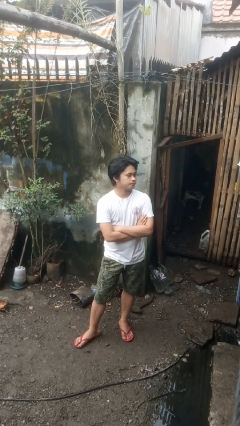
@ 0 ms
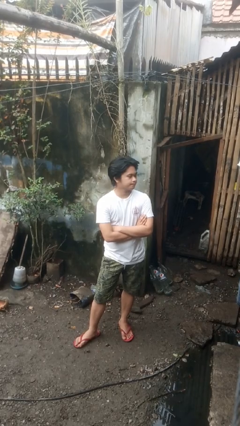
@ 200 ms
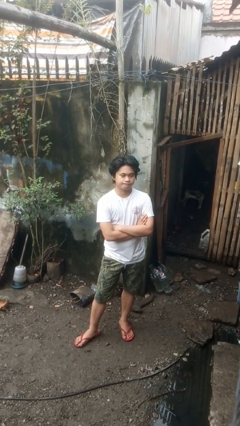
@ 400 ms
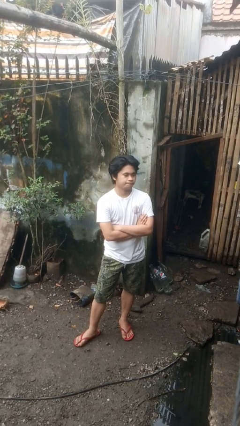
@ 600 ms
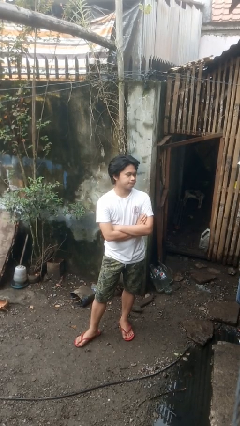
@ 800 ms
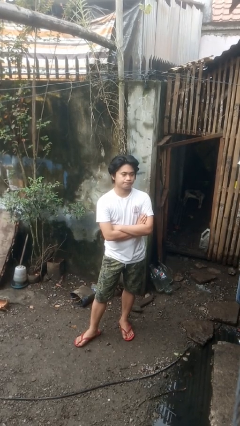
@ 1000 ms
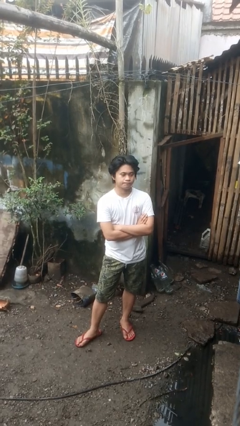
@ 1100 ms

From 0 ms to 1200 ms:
person shakes head

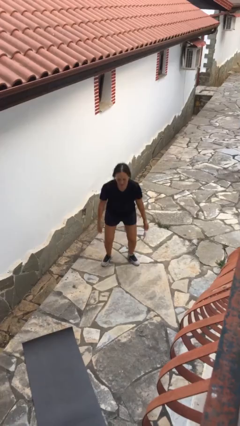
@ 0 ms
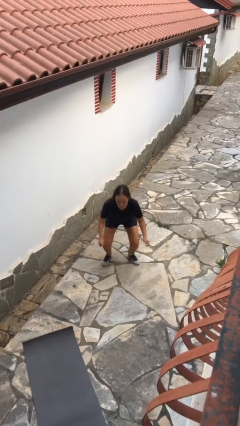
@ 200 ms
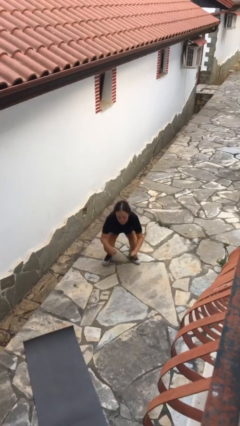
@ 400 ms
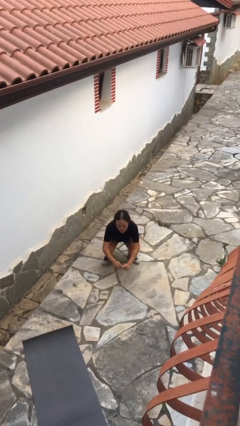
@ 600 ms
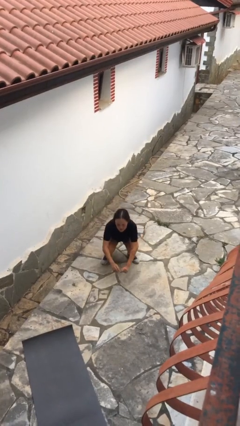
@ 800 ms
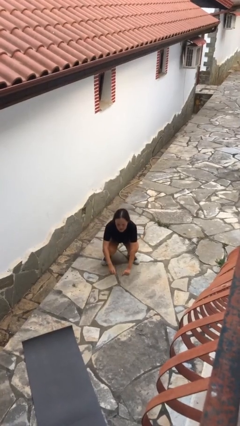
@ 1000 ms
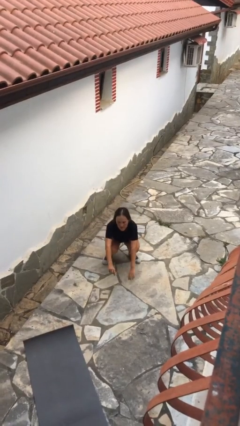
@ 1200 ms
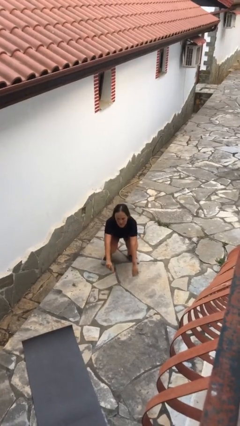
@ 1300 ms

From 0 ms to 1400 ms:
person squats

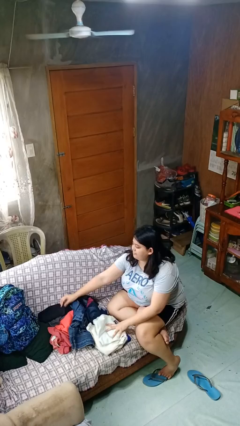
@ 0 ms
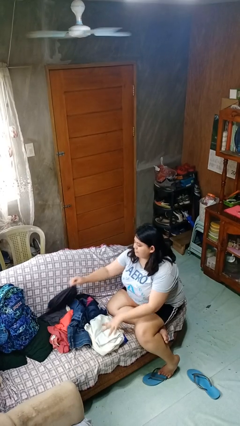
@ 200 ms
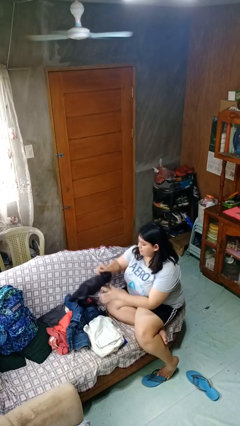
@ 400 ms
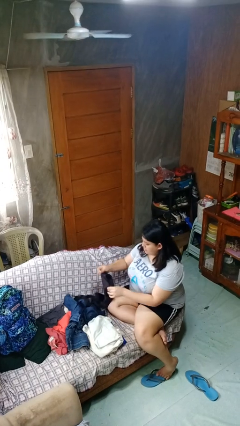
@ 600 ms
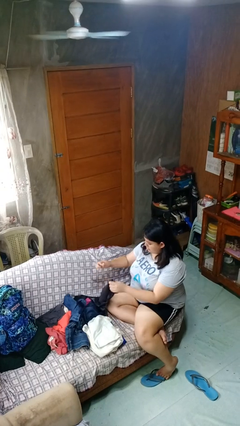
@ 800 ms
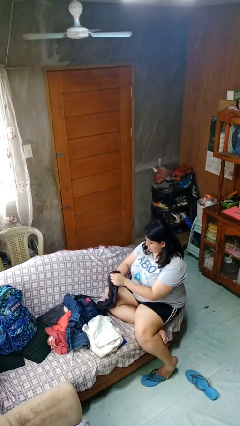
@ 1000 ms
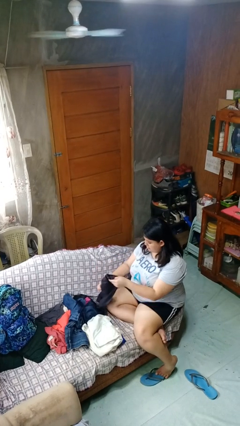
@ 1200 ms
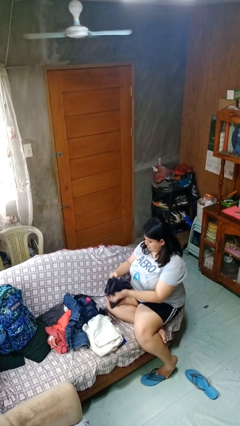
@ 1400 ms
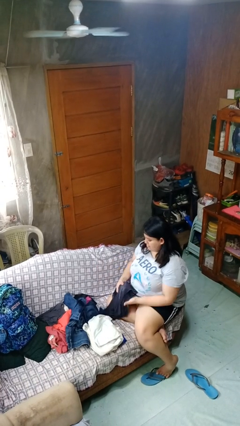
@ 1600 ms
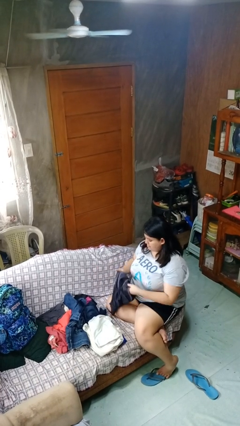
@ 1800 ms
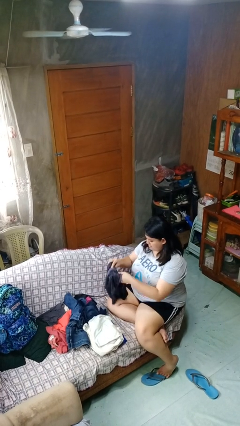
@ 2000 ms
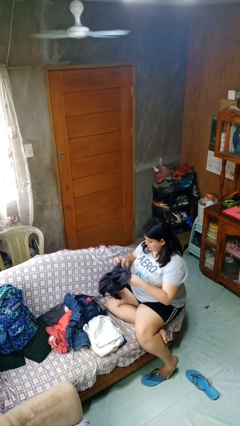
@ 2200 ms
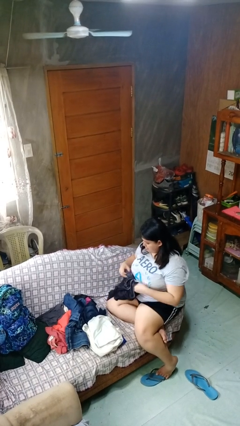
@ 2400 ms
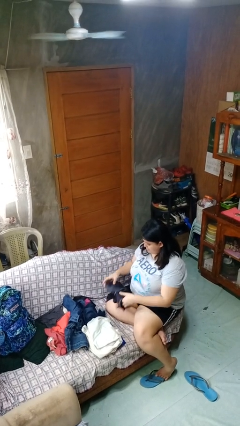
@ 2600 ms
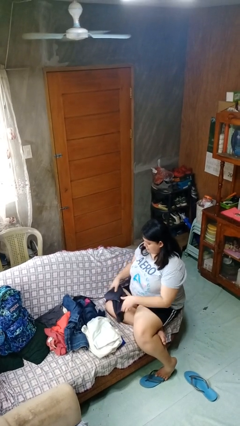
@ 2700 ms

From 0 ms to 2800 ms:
person folds shirt

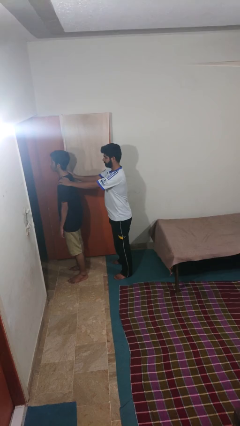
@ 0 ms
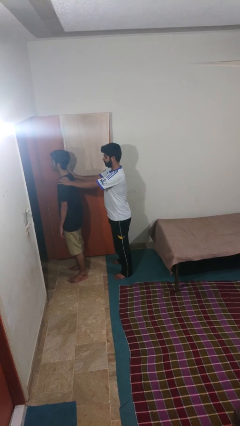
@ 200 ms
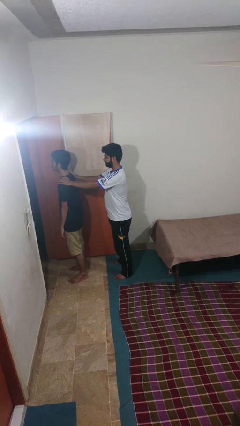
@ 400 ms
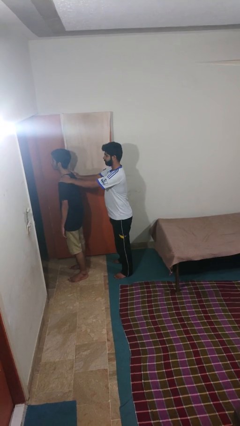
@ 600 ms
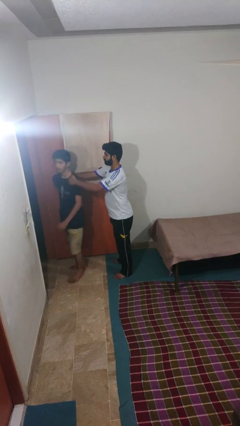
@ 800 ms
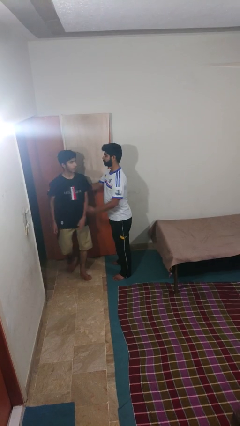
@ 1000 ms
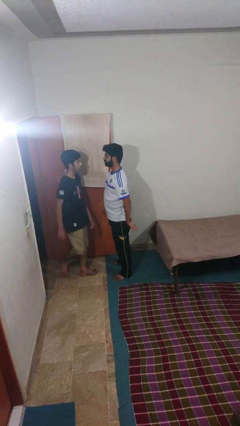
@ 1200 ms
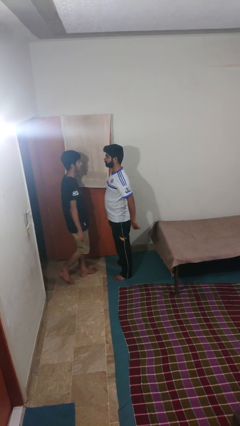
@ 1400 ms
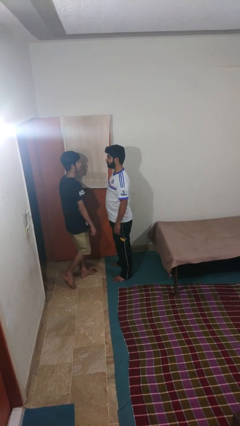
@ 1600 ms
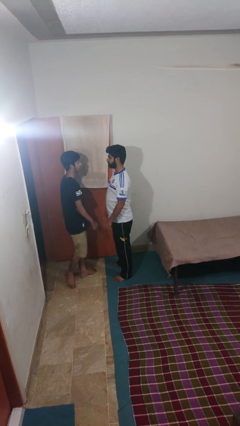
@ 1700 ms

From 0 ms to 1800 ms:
person spins person around

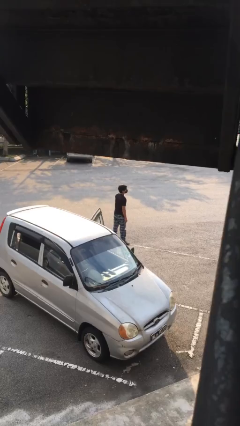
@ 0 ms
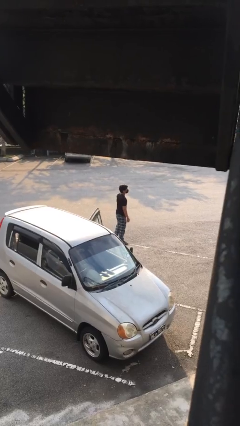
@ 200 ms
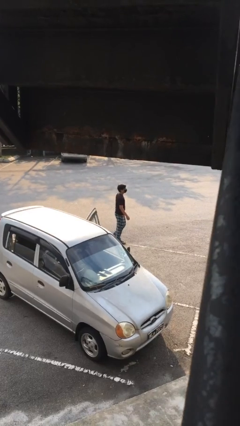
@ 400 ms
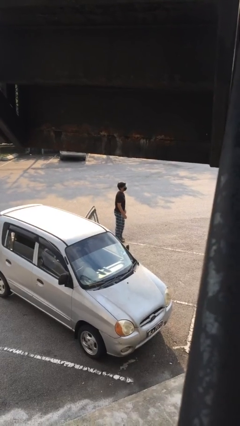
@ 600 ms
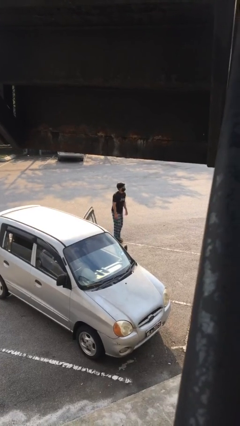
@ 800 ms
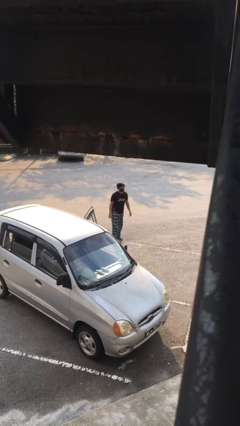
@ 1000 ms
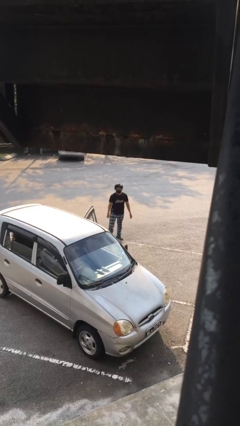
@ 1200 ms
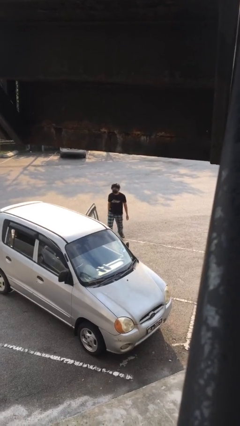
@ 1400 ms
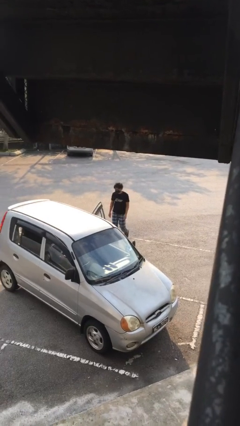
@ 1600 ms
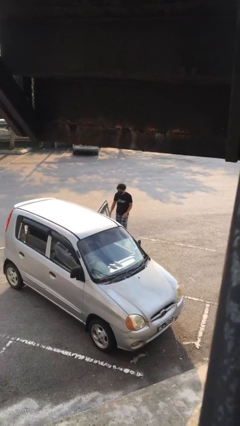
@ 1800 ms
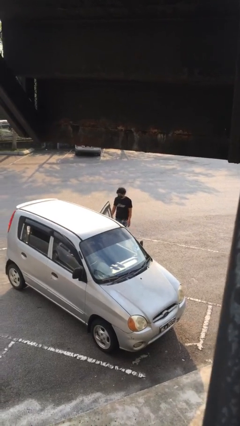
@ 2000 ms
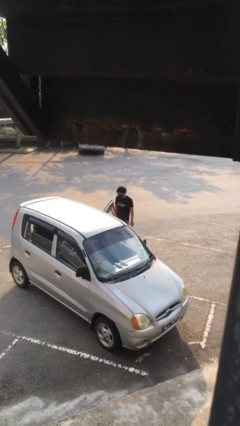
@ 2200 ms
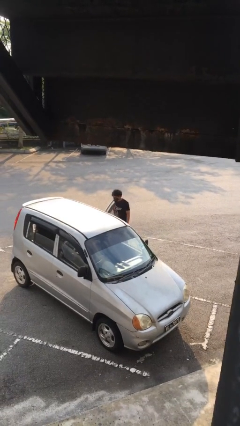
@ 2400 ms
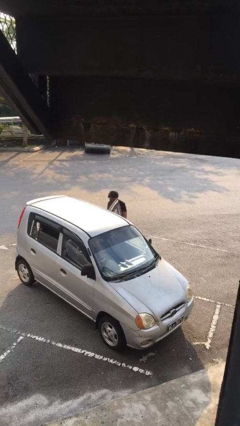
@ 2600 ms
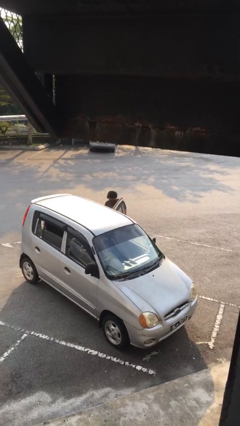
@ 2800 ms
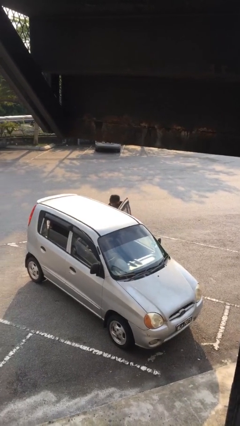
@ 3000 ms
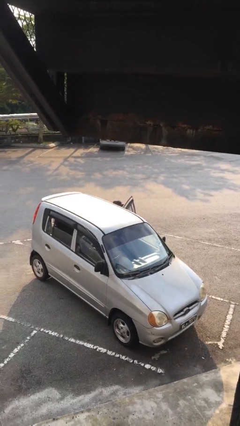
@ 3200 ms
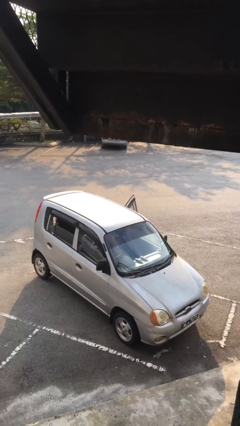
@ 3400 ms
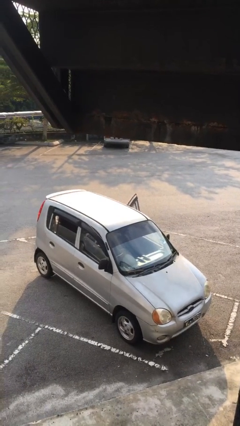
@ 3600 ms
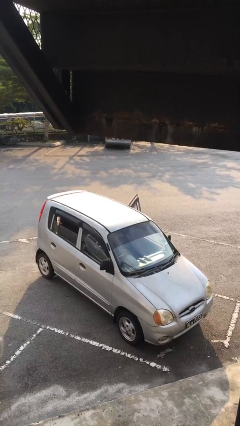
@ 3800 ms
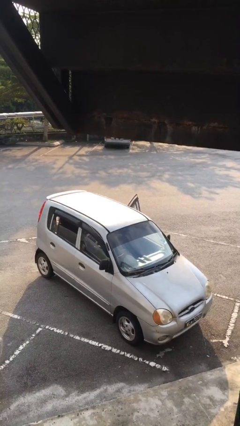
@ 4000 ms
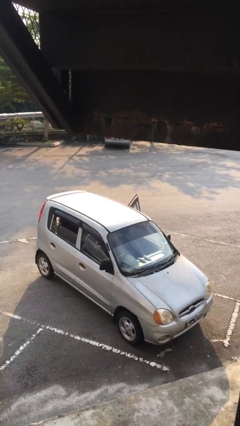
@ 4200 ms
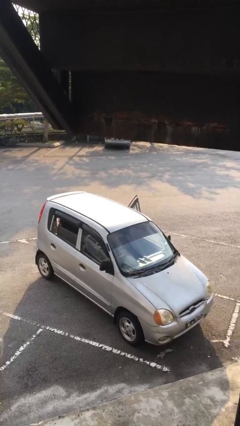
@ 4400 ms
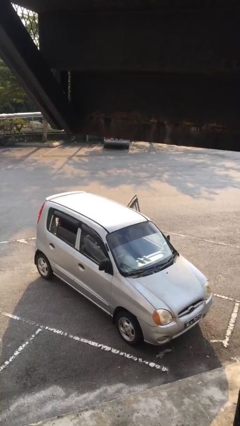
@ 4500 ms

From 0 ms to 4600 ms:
person enters car

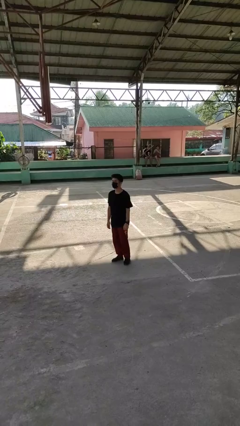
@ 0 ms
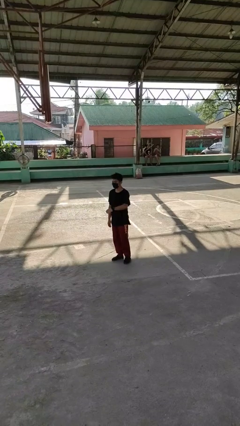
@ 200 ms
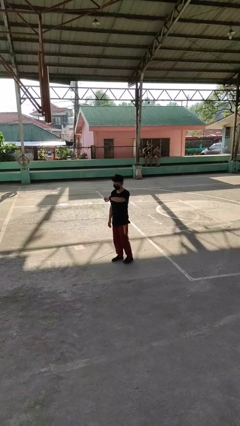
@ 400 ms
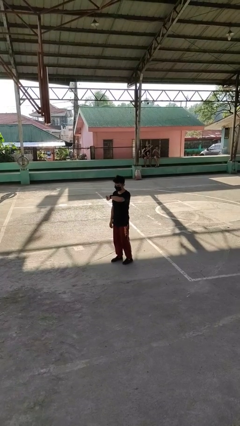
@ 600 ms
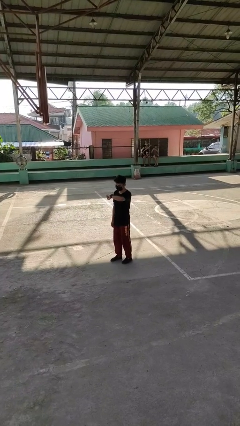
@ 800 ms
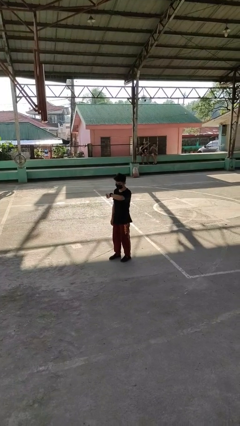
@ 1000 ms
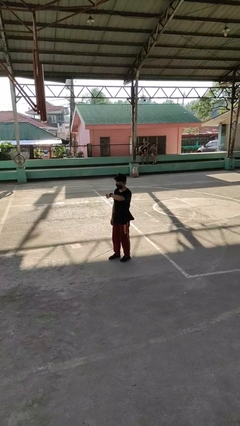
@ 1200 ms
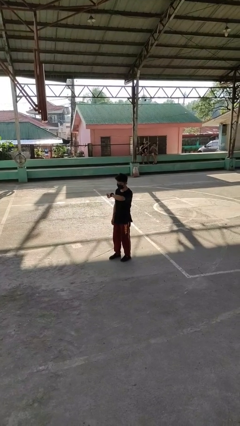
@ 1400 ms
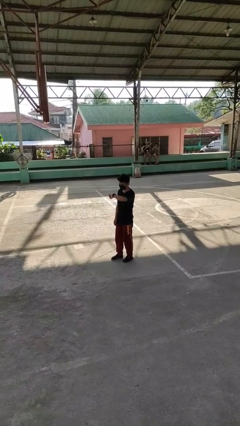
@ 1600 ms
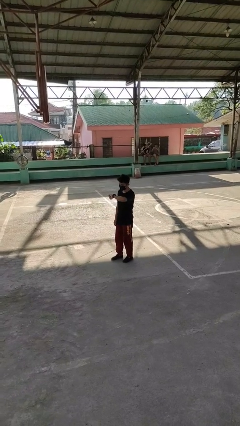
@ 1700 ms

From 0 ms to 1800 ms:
person looks at wristwatch

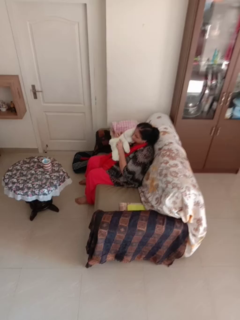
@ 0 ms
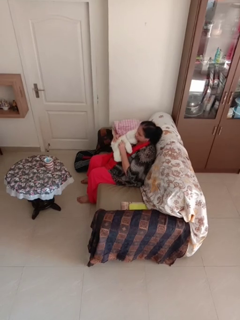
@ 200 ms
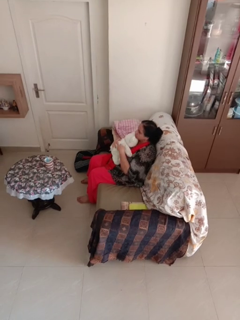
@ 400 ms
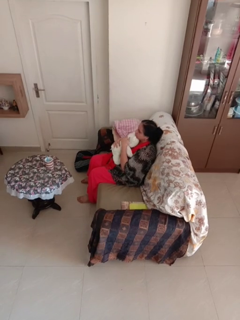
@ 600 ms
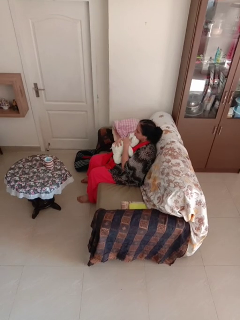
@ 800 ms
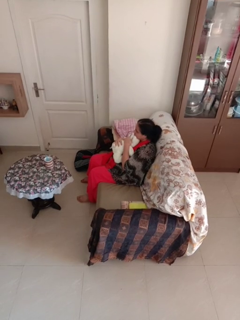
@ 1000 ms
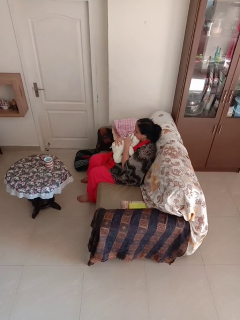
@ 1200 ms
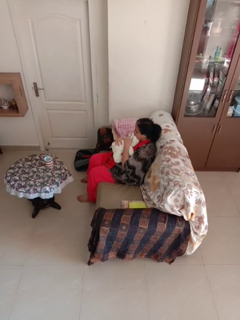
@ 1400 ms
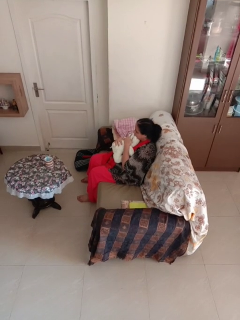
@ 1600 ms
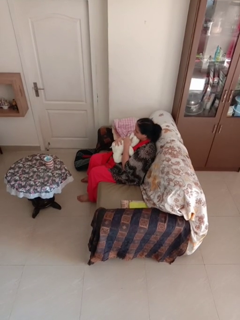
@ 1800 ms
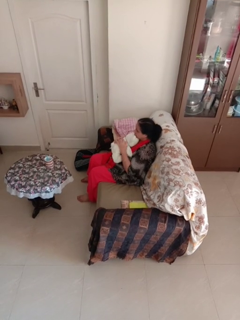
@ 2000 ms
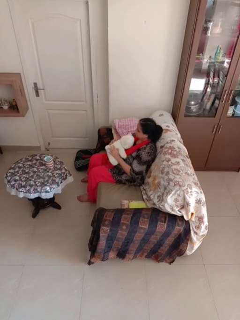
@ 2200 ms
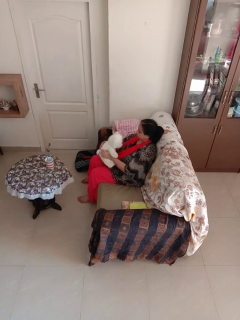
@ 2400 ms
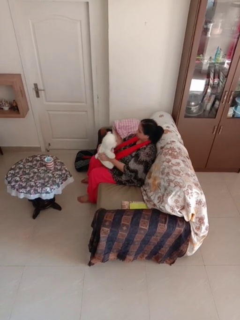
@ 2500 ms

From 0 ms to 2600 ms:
person hugs stuffed animal

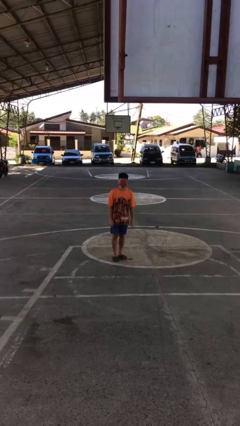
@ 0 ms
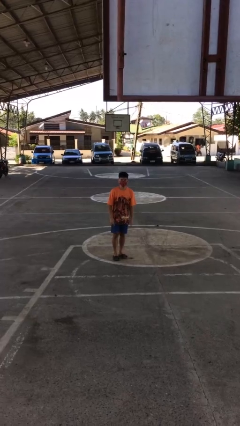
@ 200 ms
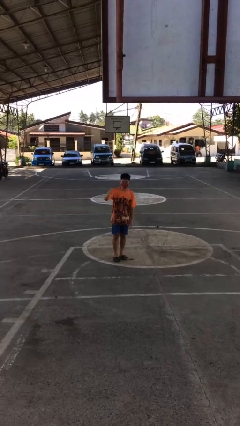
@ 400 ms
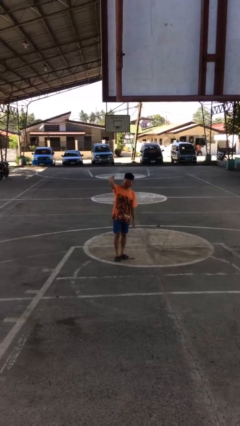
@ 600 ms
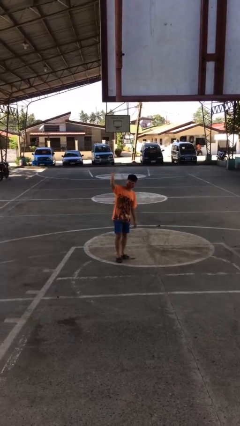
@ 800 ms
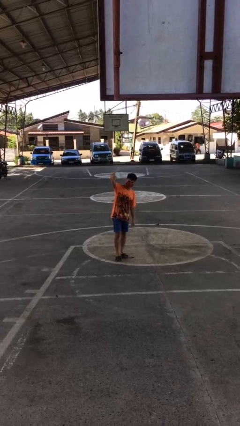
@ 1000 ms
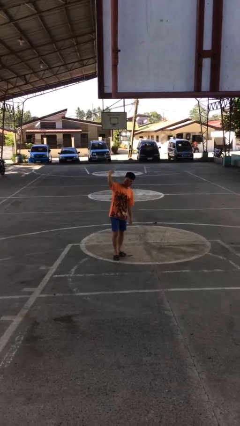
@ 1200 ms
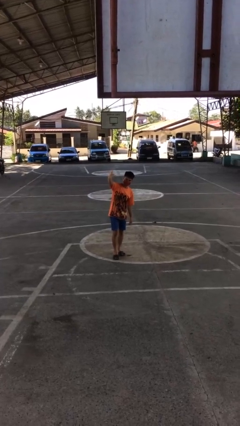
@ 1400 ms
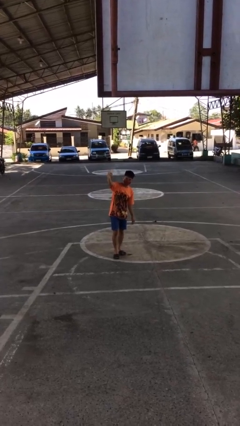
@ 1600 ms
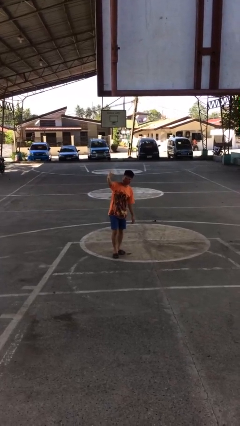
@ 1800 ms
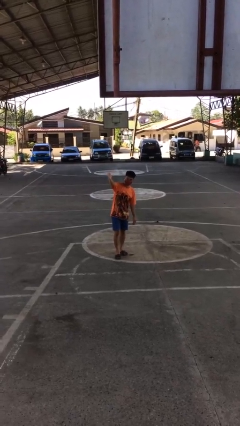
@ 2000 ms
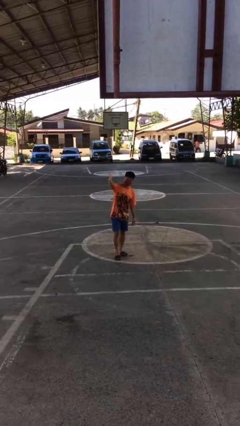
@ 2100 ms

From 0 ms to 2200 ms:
person gestures come here
